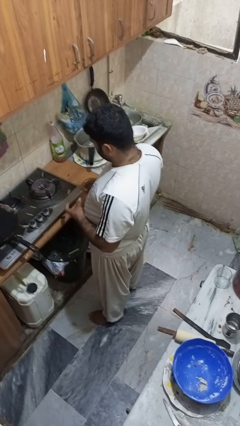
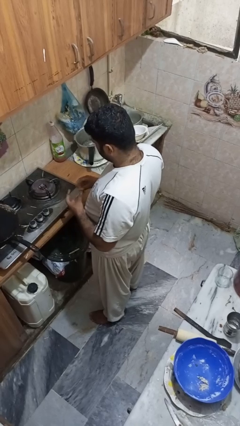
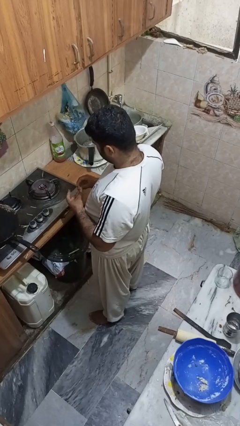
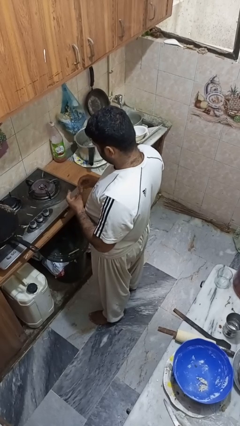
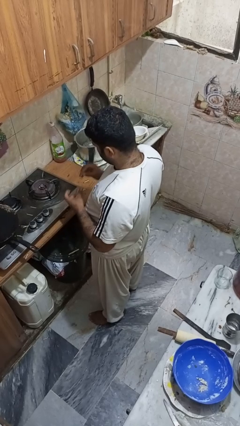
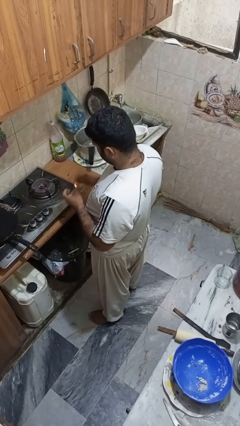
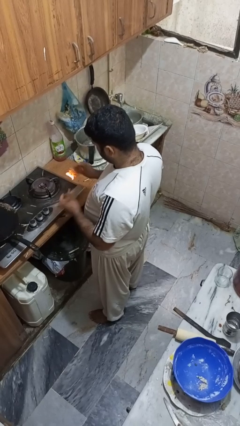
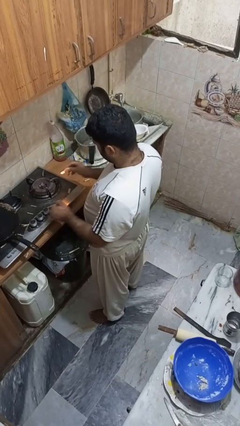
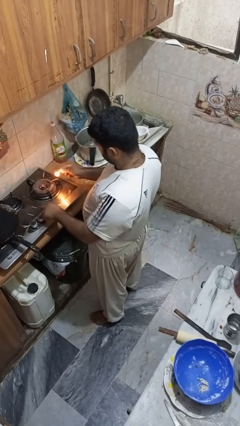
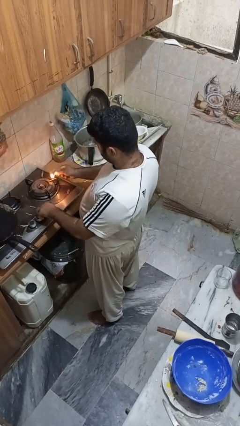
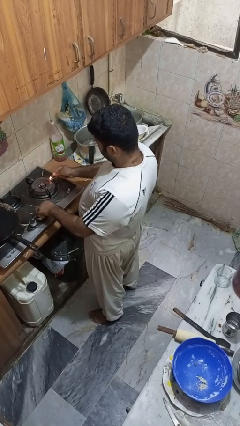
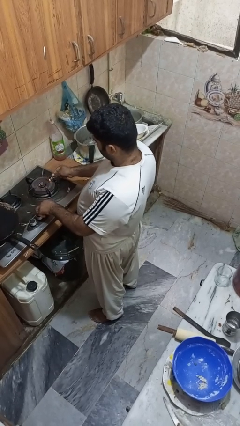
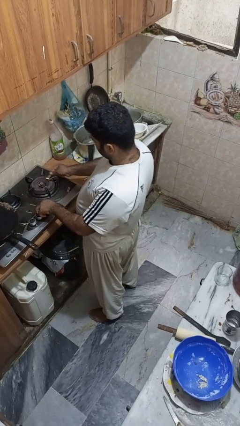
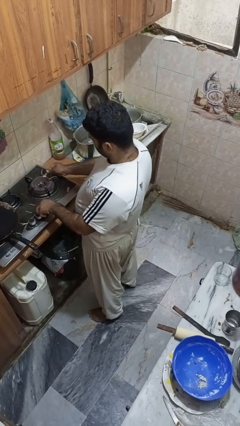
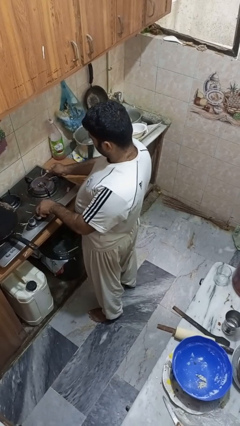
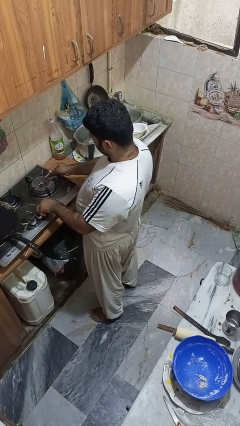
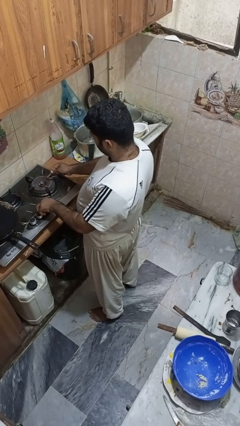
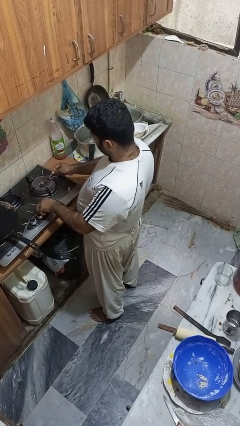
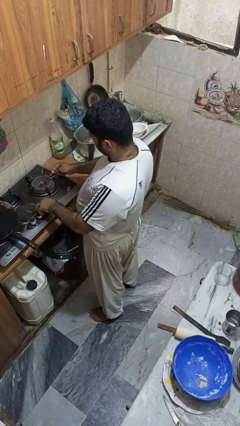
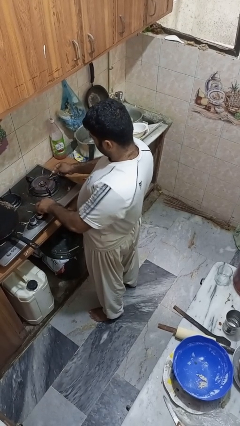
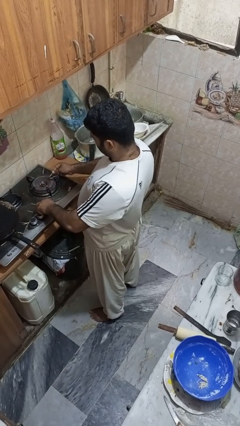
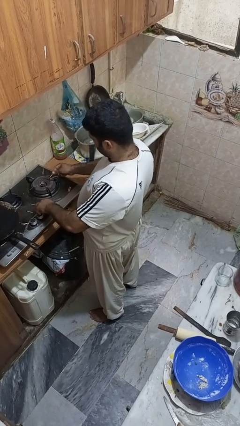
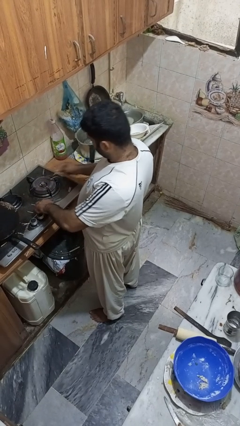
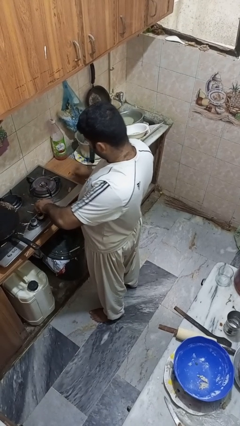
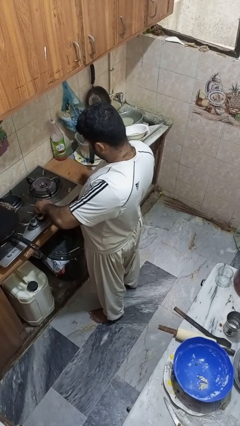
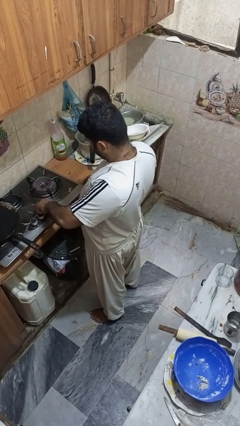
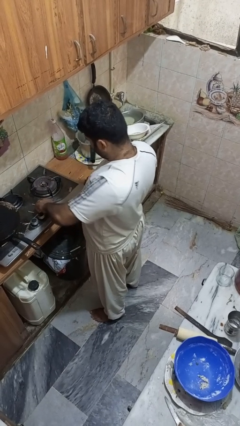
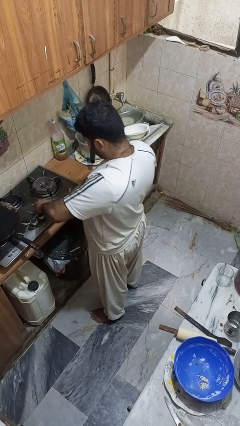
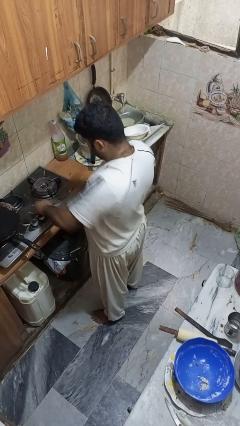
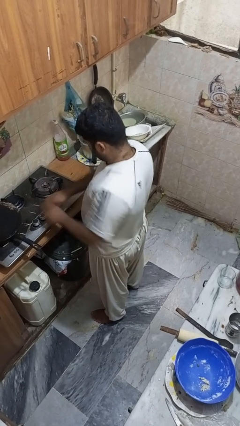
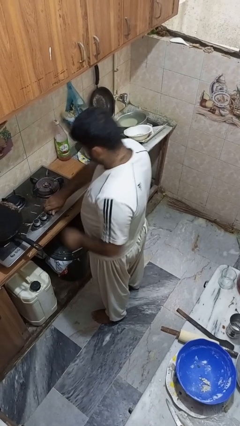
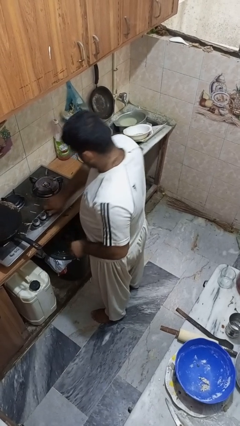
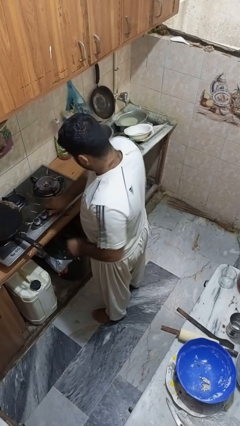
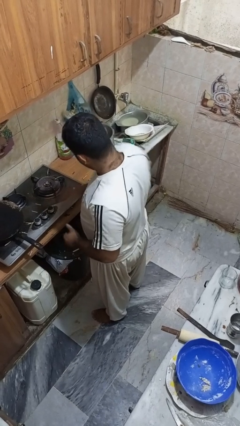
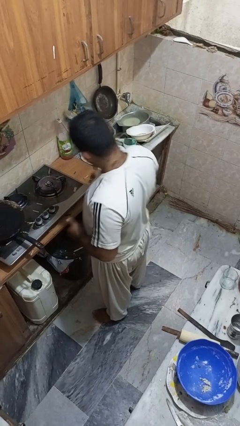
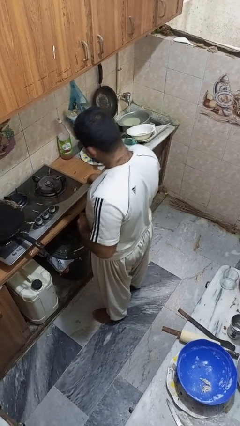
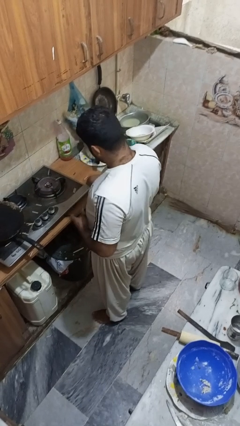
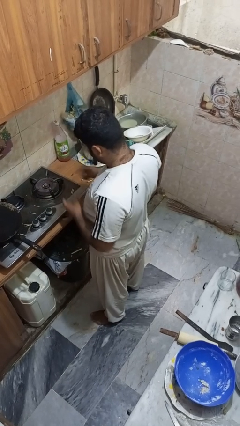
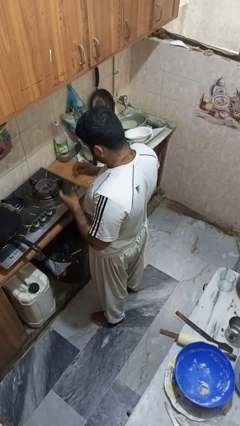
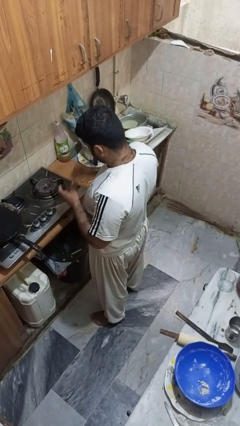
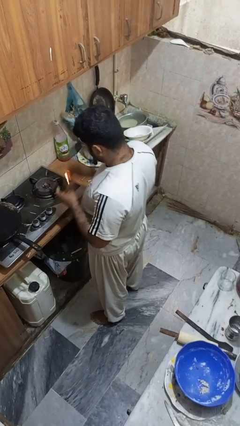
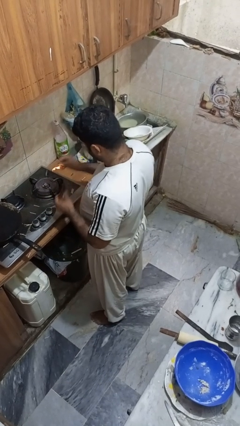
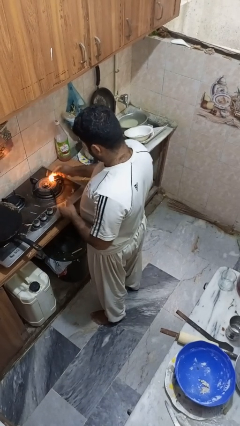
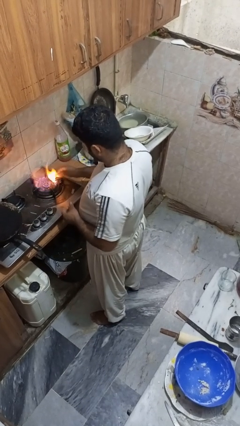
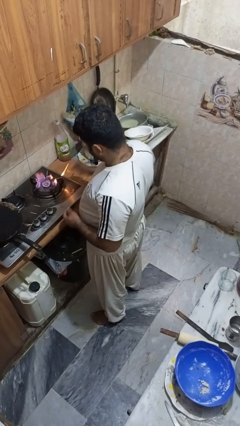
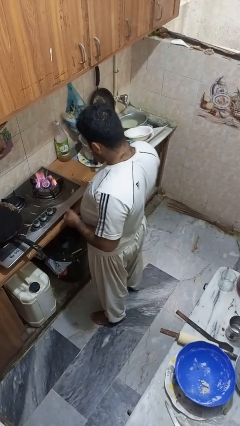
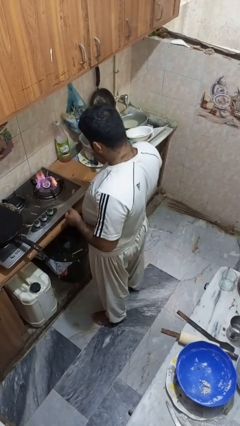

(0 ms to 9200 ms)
person turns on stovetop

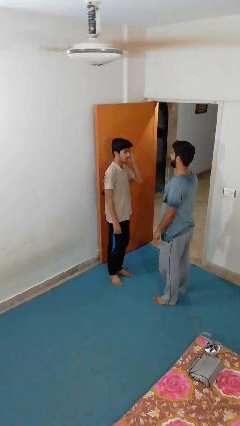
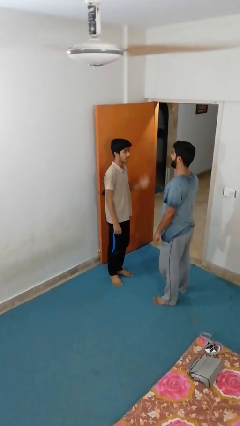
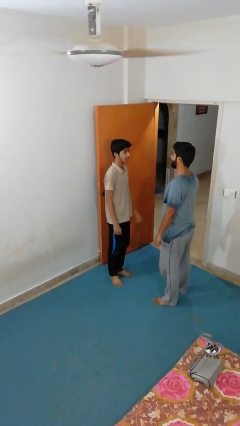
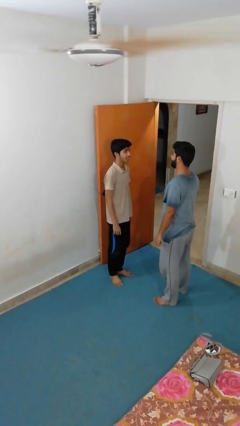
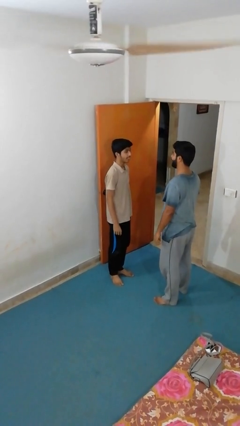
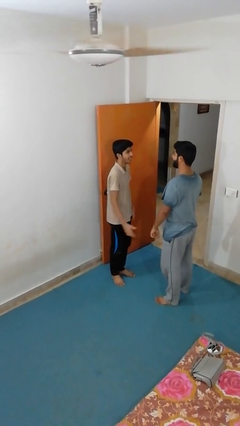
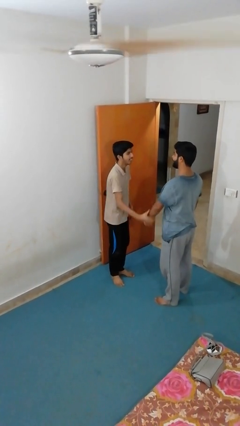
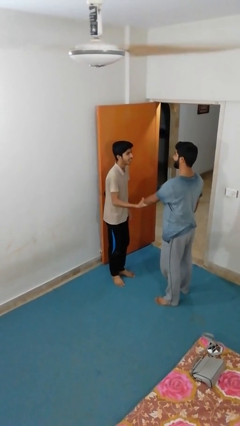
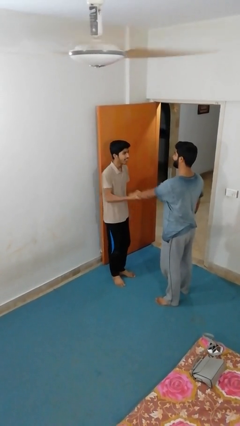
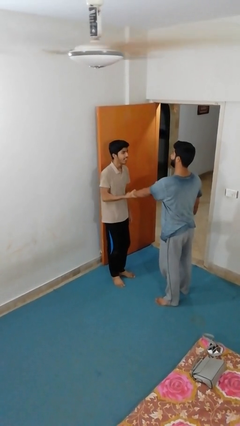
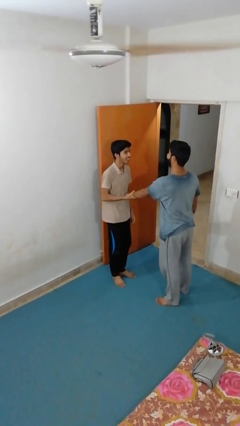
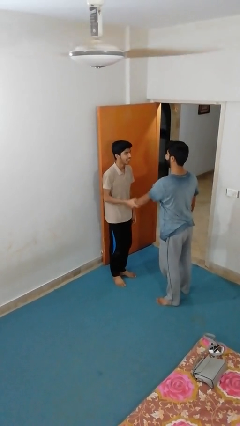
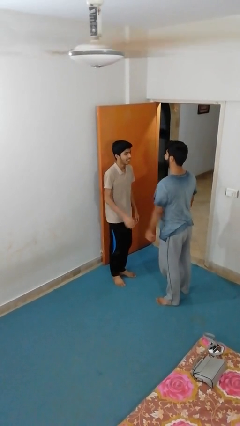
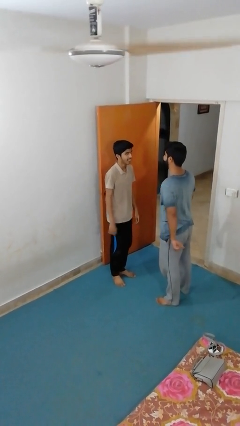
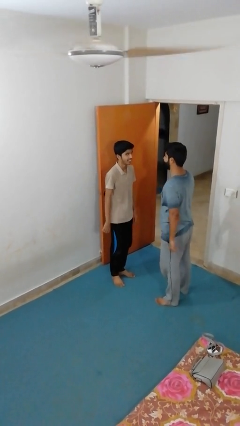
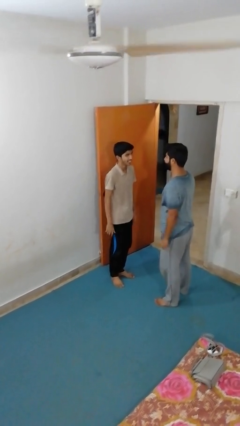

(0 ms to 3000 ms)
person grabs person by forearm

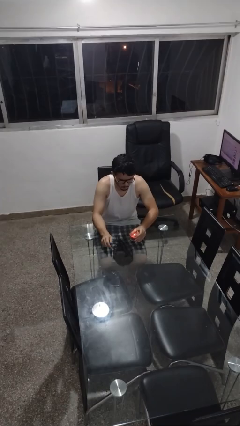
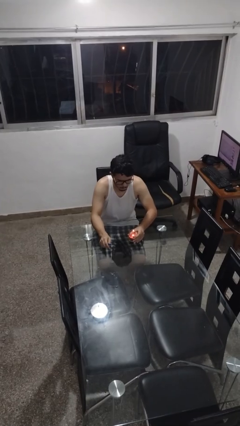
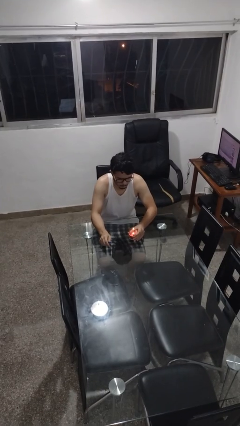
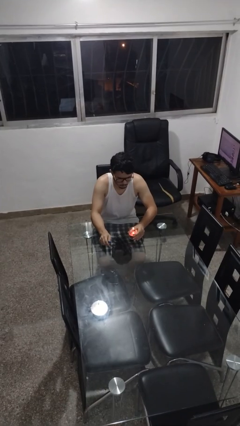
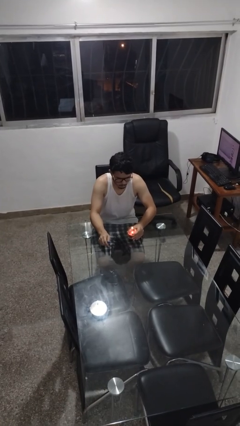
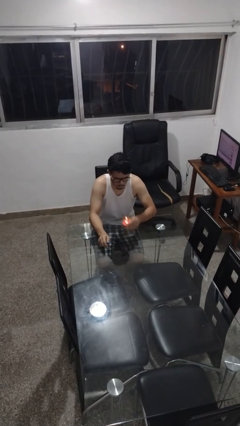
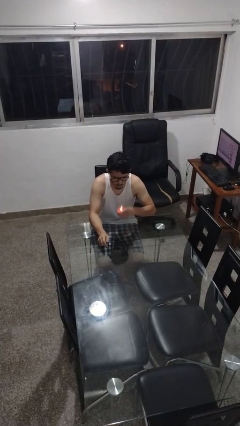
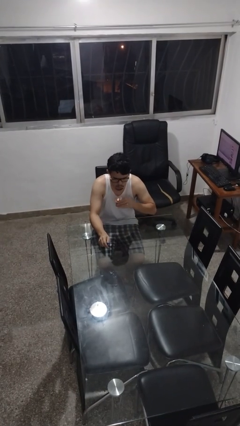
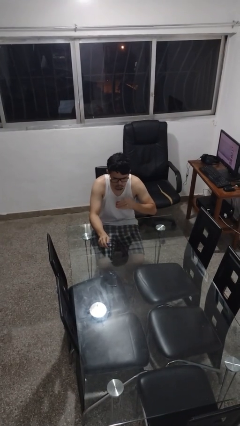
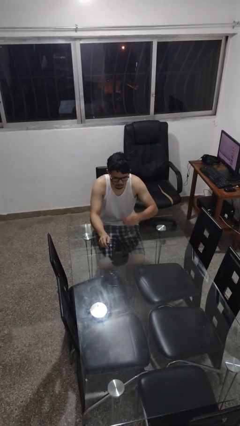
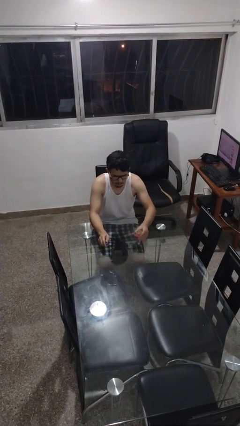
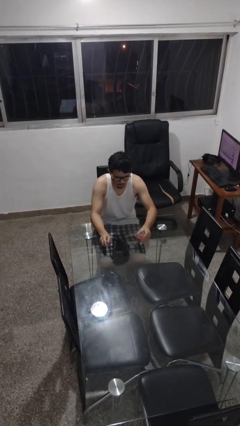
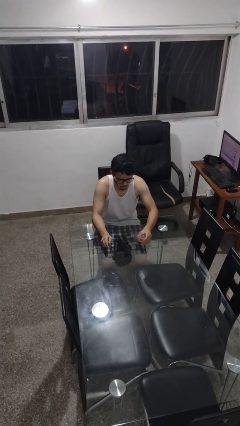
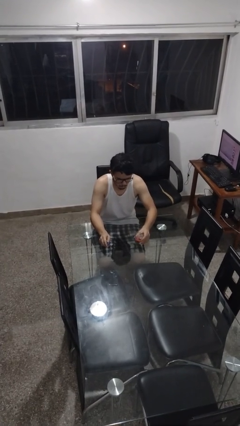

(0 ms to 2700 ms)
person extinguishes candle

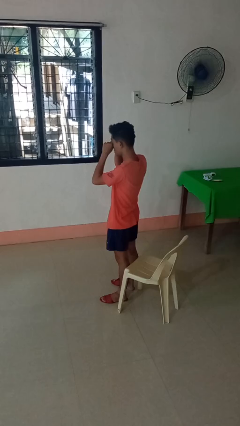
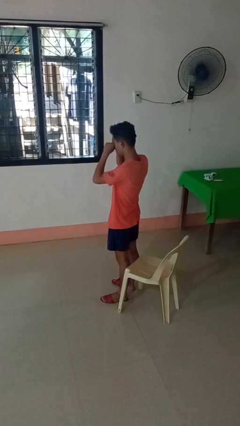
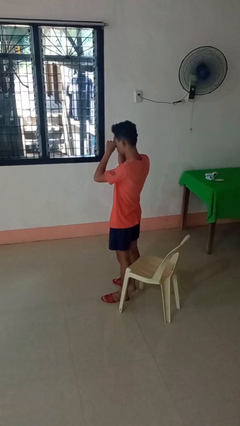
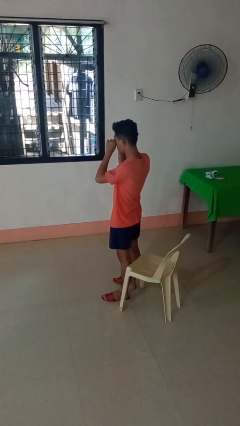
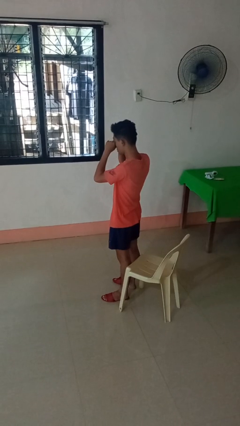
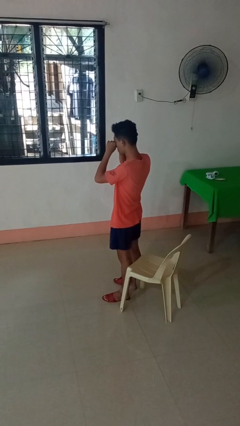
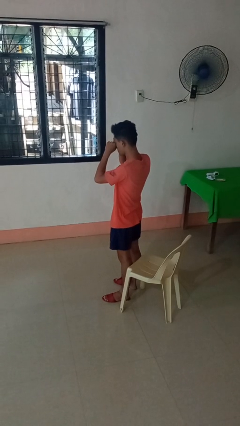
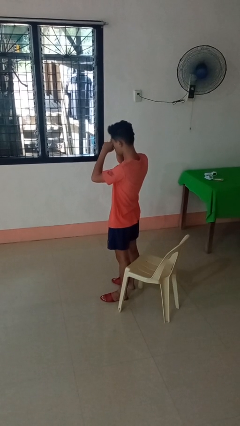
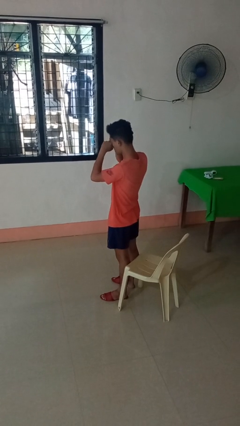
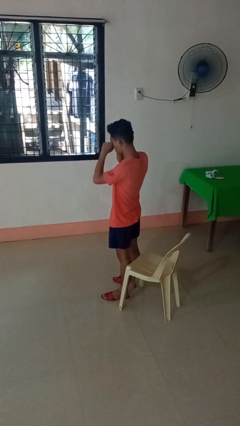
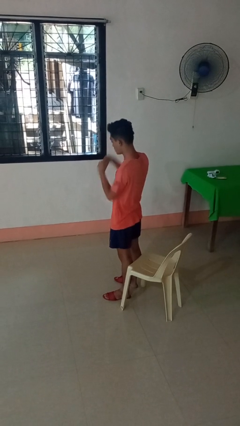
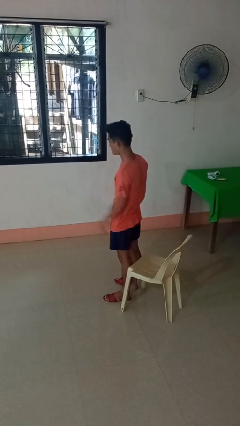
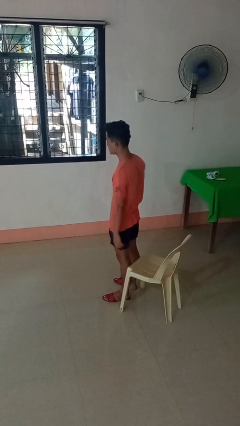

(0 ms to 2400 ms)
person rubs eyes

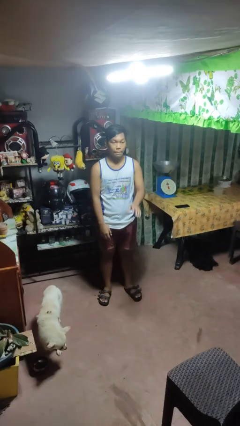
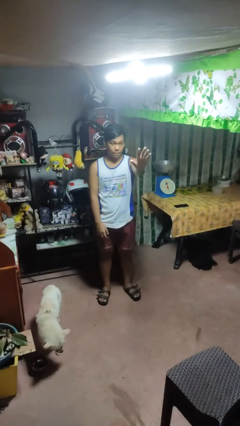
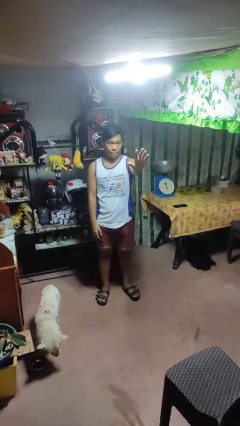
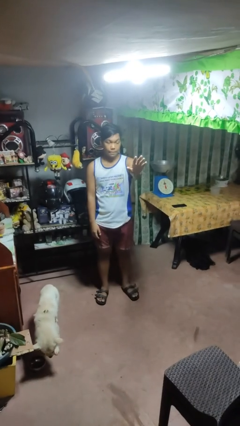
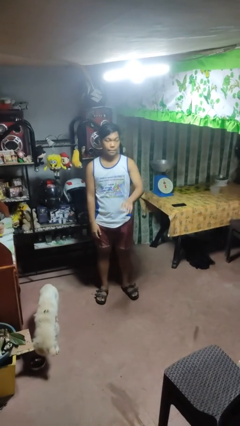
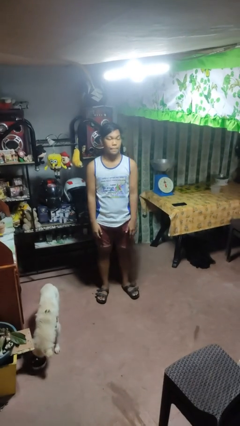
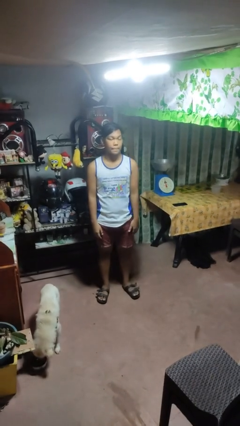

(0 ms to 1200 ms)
person gestures stop
